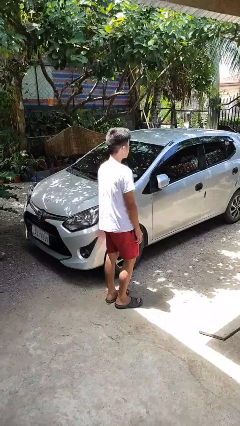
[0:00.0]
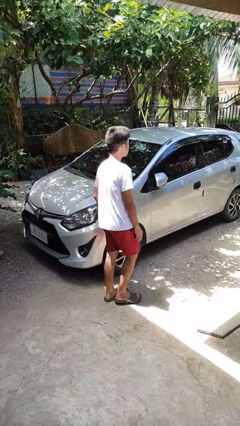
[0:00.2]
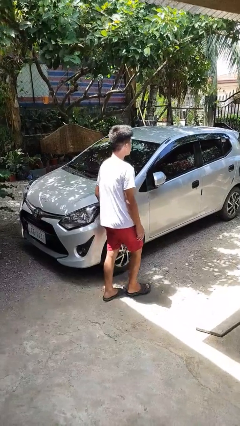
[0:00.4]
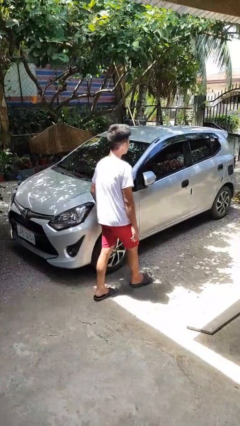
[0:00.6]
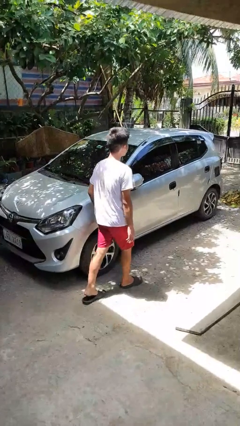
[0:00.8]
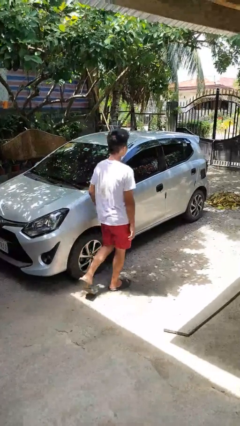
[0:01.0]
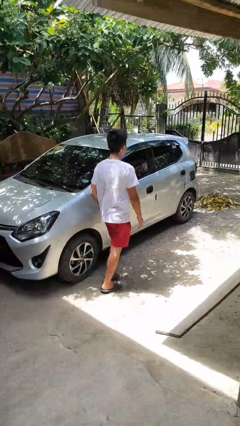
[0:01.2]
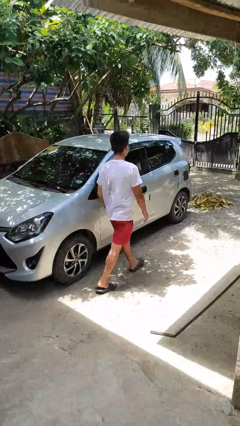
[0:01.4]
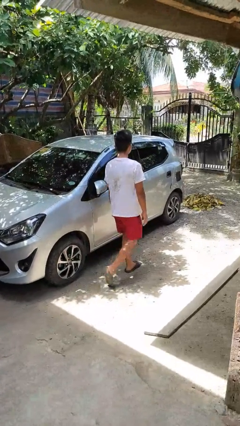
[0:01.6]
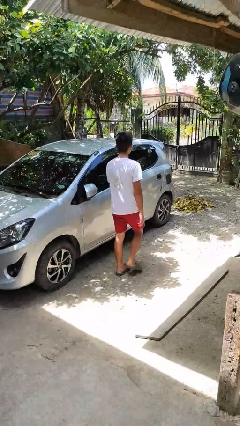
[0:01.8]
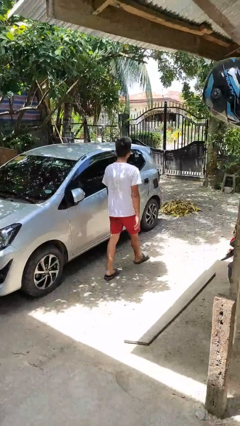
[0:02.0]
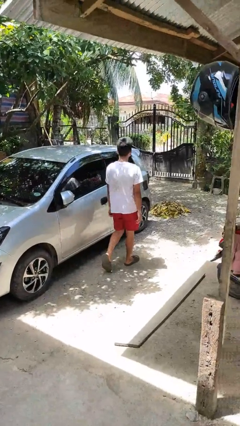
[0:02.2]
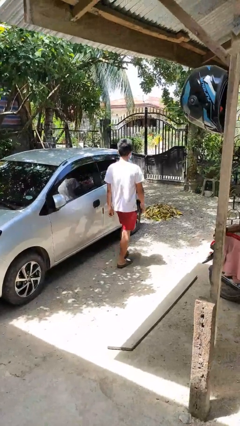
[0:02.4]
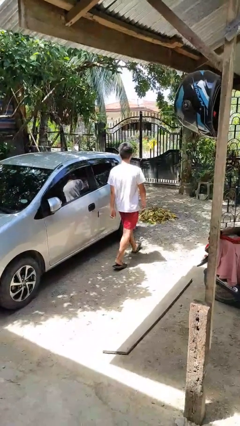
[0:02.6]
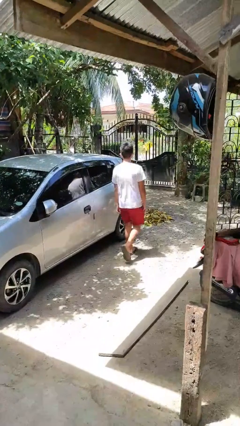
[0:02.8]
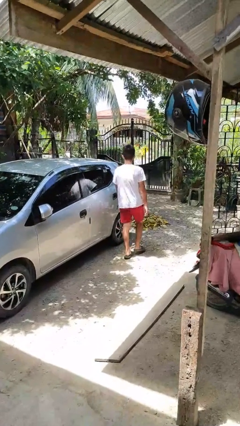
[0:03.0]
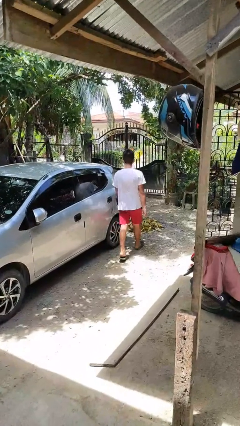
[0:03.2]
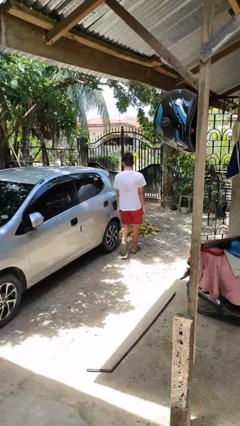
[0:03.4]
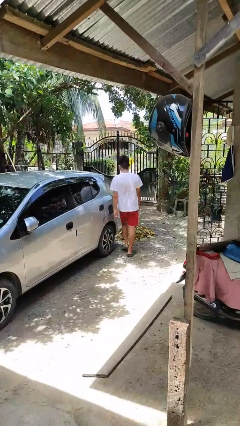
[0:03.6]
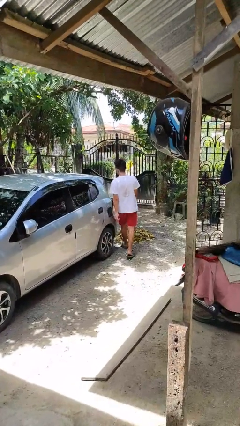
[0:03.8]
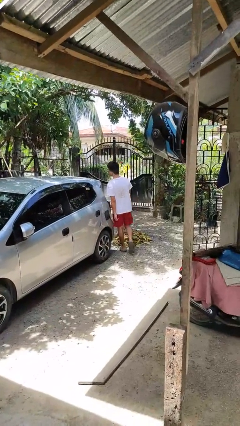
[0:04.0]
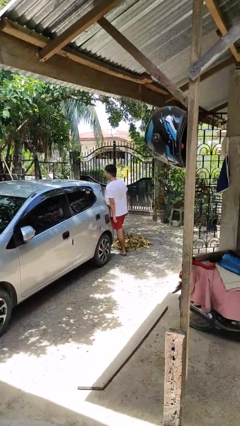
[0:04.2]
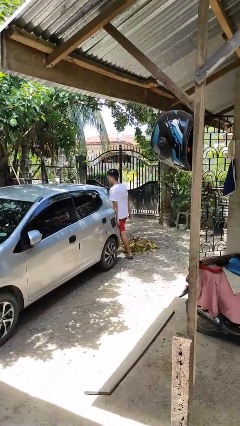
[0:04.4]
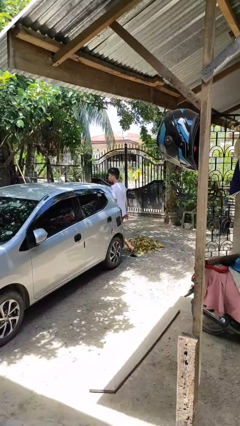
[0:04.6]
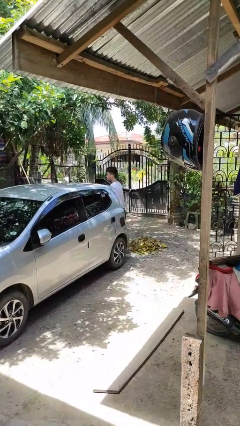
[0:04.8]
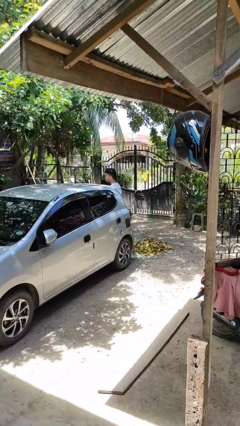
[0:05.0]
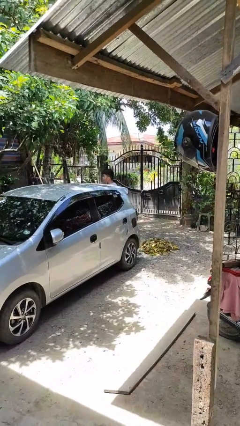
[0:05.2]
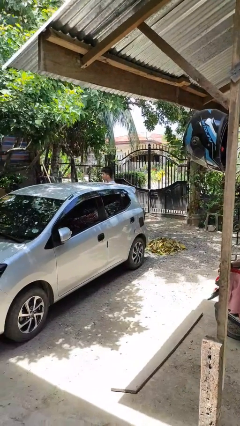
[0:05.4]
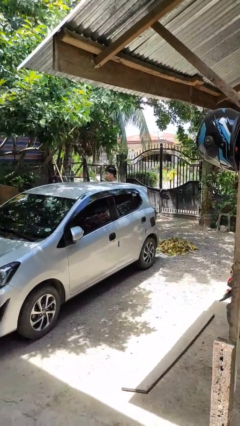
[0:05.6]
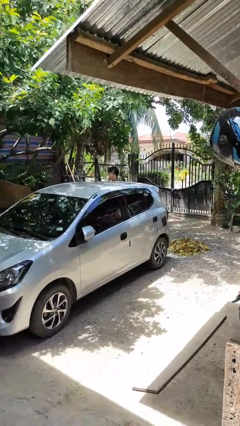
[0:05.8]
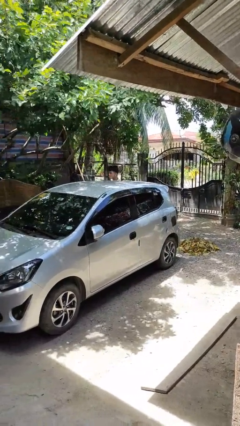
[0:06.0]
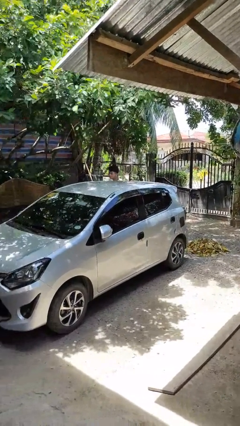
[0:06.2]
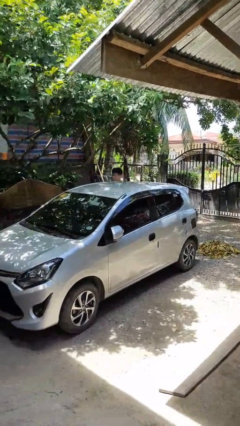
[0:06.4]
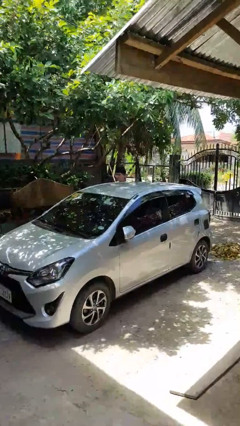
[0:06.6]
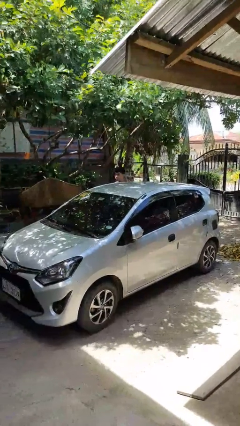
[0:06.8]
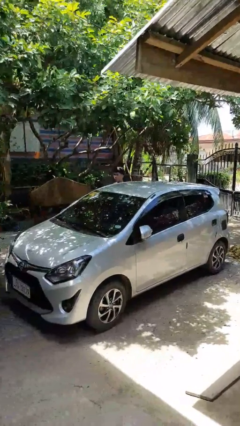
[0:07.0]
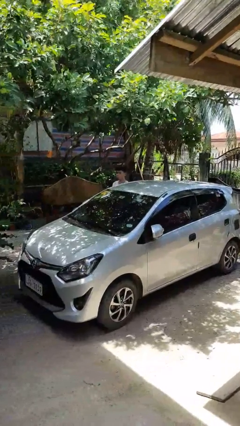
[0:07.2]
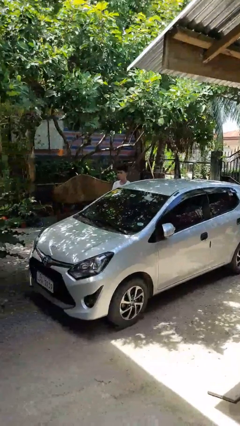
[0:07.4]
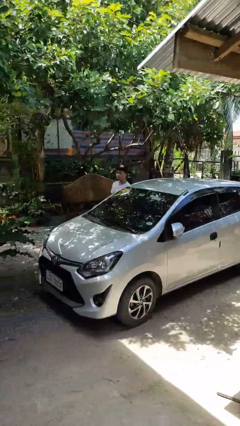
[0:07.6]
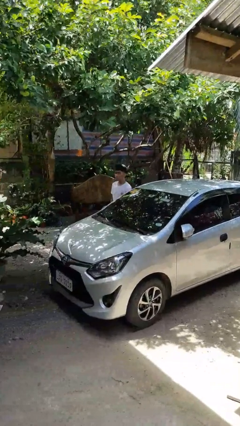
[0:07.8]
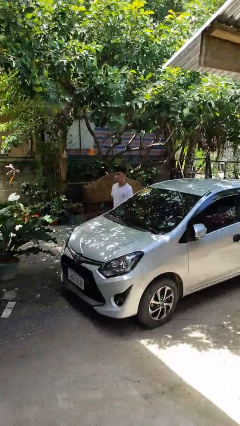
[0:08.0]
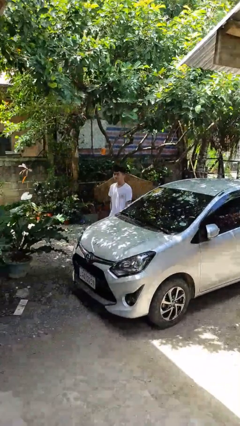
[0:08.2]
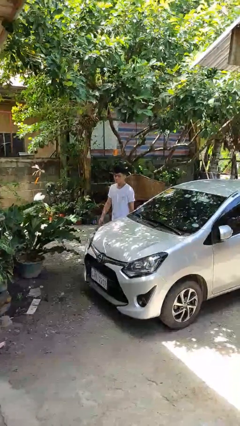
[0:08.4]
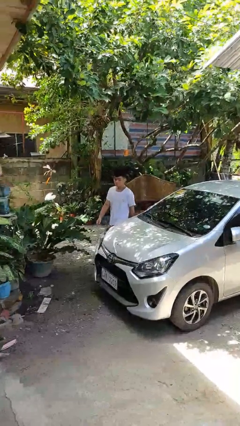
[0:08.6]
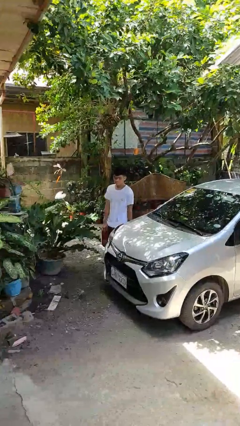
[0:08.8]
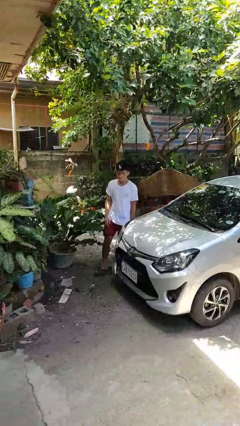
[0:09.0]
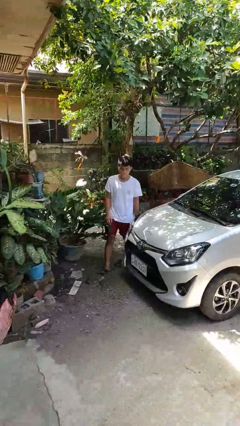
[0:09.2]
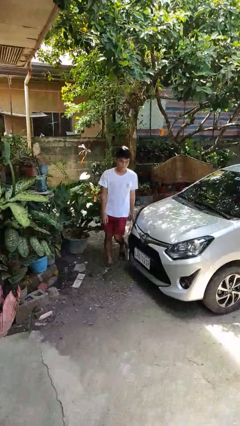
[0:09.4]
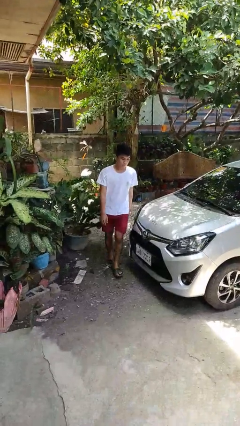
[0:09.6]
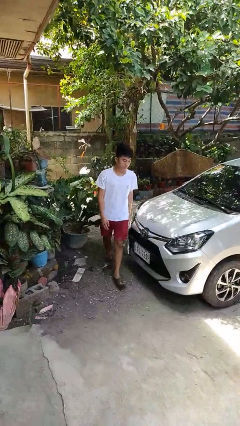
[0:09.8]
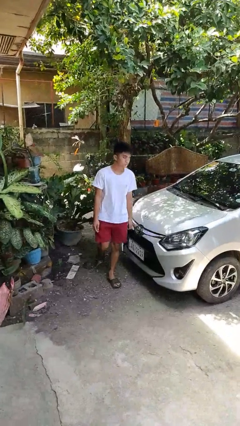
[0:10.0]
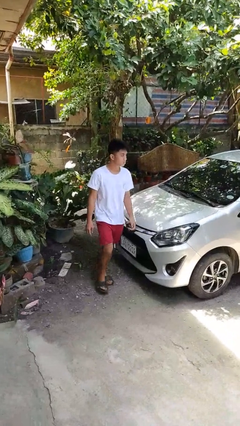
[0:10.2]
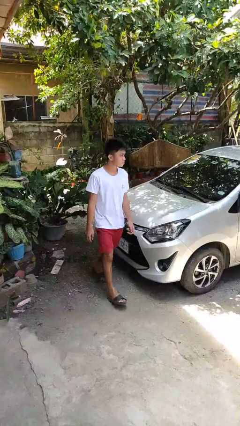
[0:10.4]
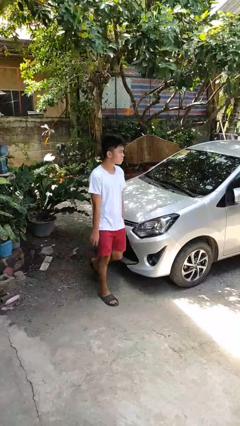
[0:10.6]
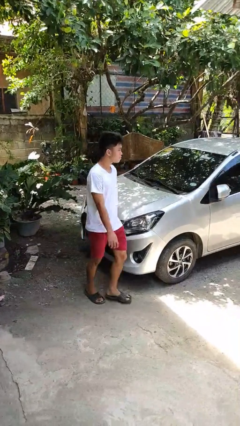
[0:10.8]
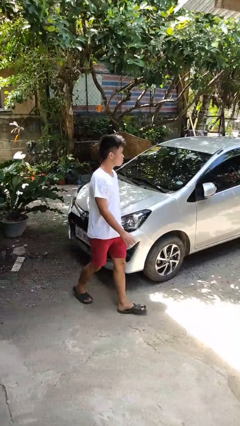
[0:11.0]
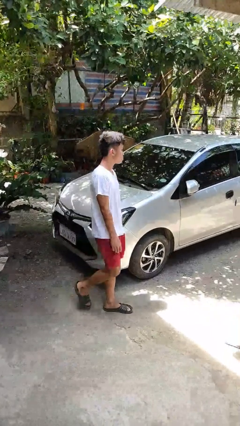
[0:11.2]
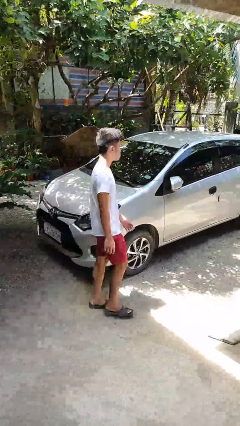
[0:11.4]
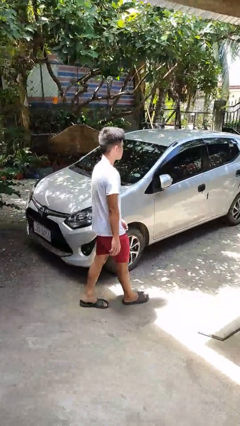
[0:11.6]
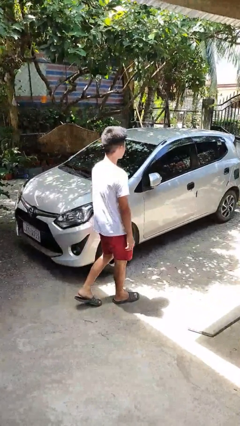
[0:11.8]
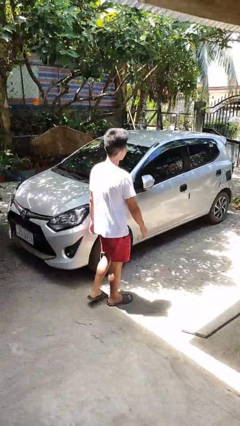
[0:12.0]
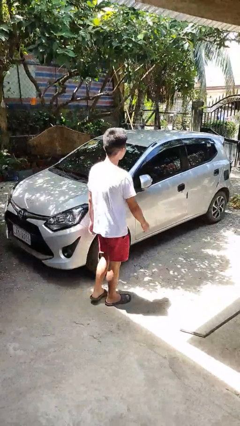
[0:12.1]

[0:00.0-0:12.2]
person walks around car

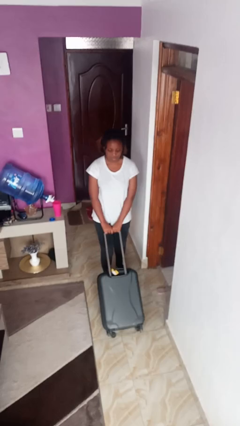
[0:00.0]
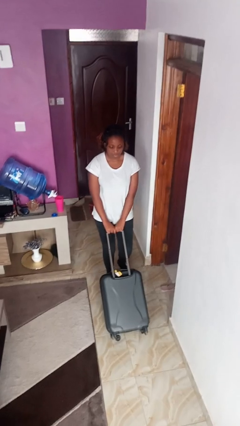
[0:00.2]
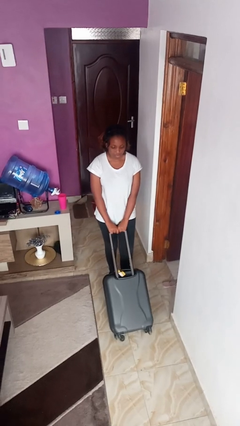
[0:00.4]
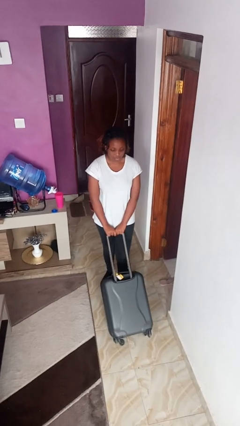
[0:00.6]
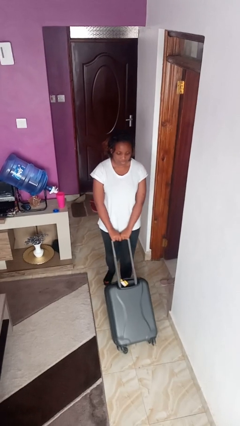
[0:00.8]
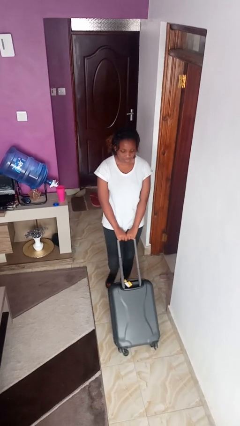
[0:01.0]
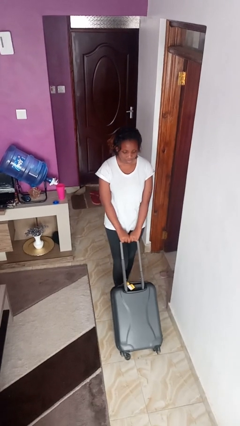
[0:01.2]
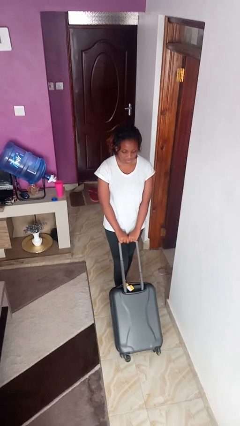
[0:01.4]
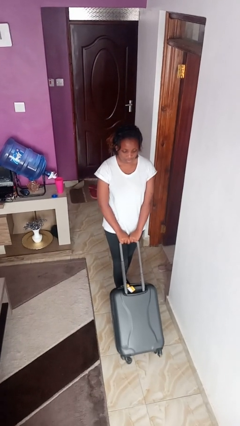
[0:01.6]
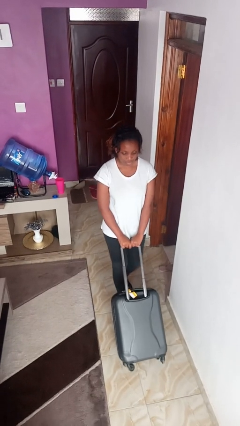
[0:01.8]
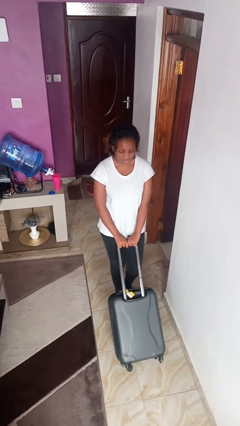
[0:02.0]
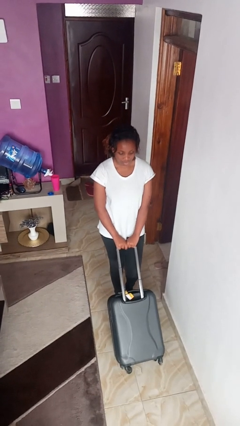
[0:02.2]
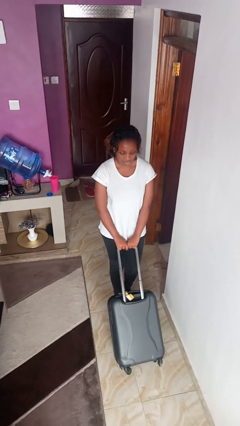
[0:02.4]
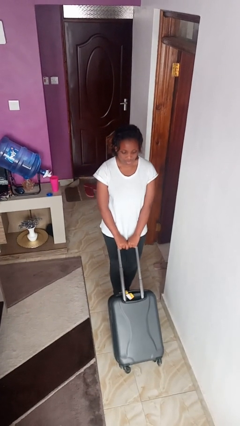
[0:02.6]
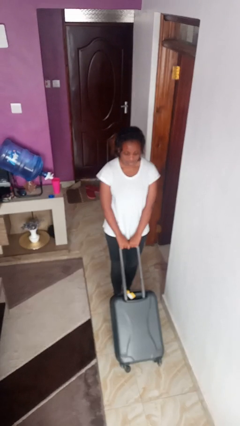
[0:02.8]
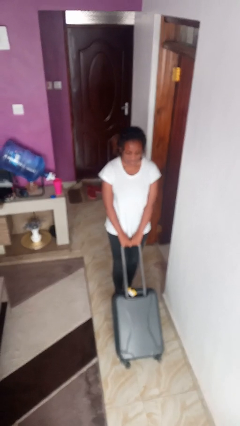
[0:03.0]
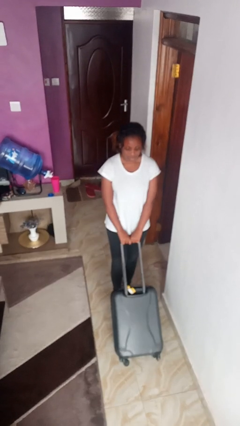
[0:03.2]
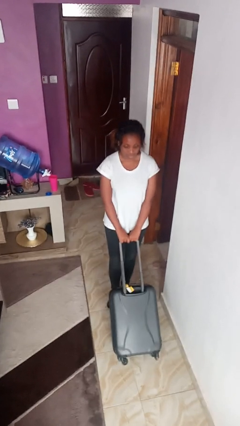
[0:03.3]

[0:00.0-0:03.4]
person pushes wheeled cart

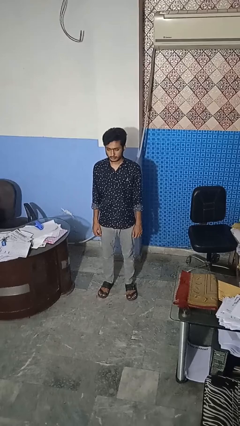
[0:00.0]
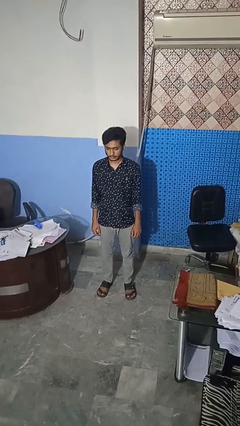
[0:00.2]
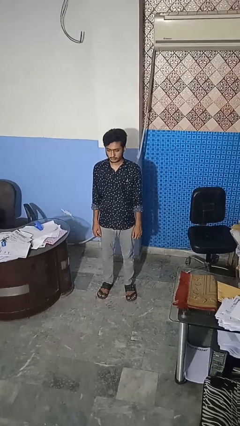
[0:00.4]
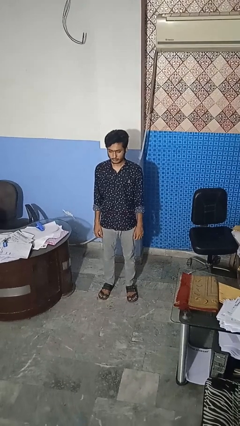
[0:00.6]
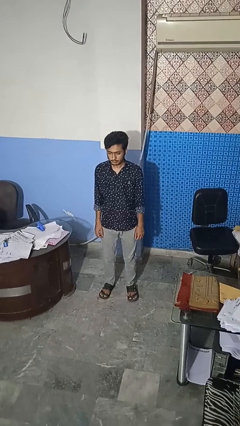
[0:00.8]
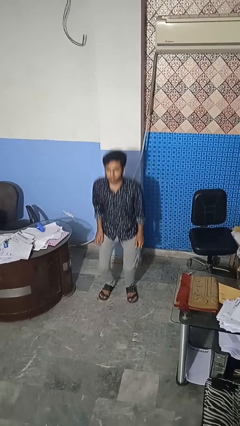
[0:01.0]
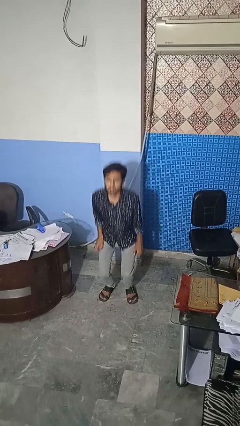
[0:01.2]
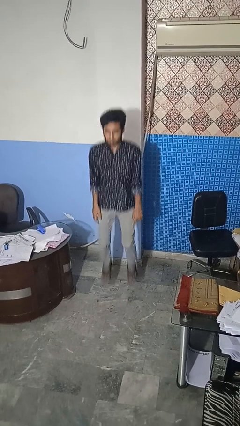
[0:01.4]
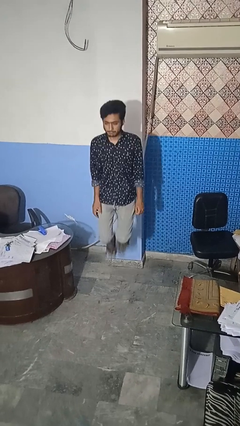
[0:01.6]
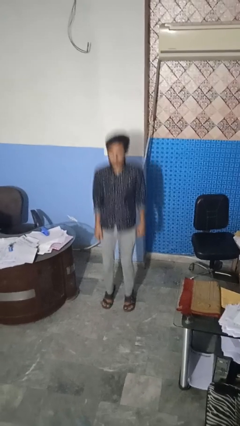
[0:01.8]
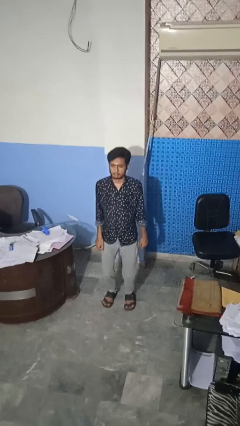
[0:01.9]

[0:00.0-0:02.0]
person jumps

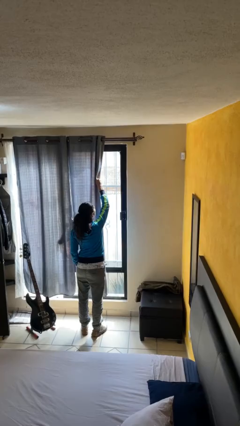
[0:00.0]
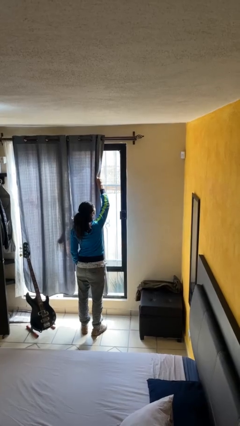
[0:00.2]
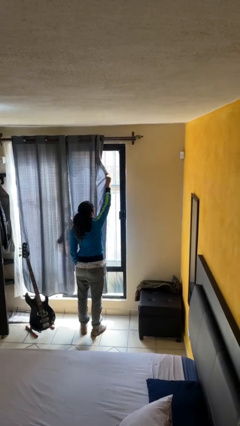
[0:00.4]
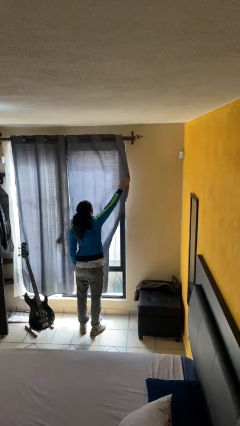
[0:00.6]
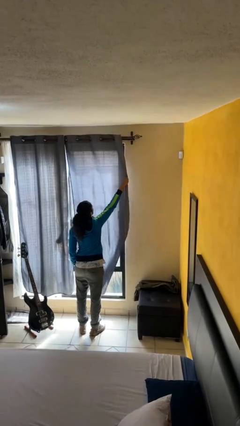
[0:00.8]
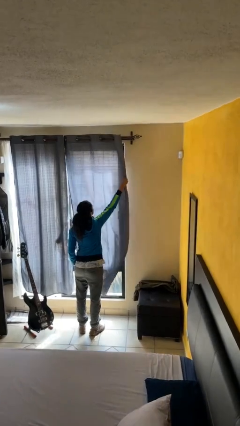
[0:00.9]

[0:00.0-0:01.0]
person closes curtains
